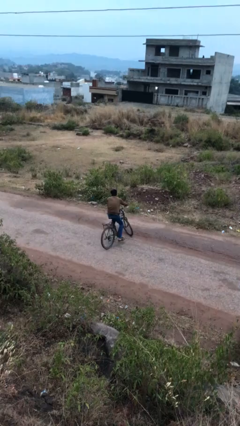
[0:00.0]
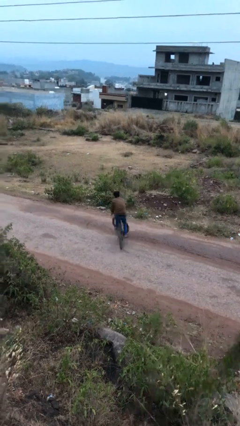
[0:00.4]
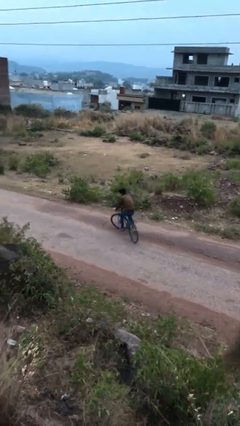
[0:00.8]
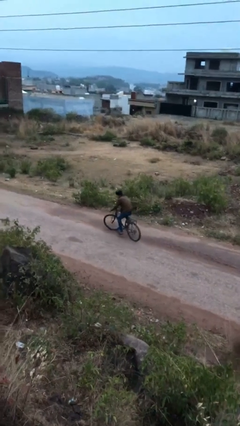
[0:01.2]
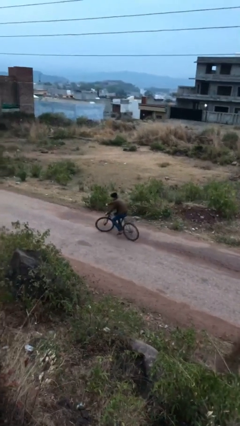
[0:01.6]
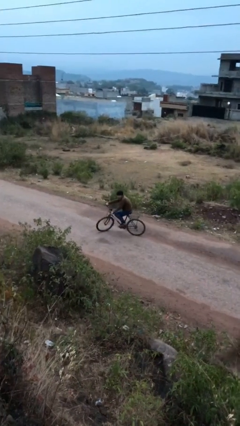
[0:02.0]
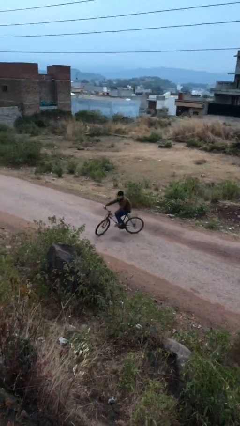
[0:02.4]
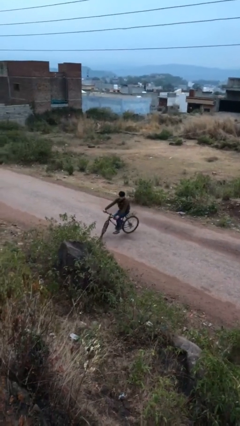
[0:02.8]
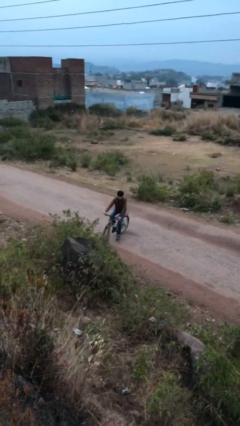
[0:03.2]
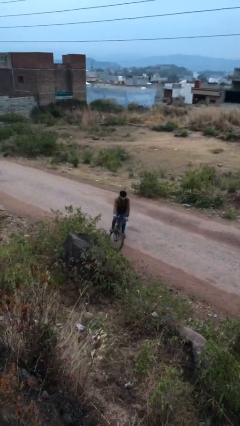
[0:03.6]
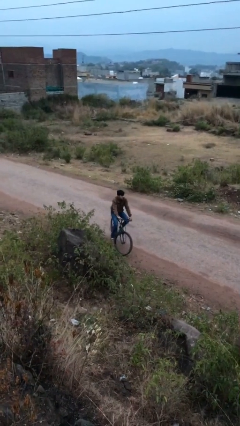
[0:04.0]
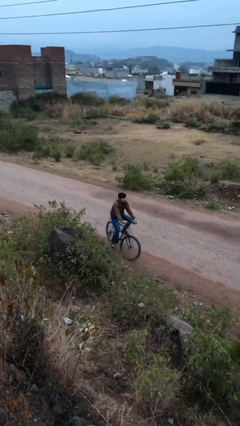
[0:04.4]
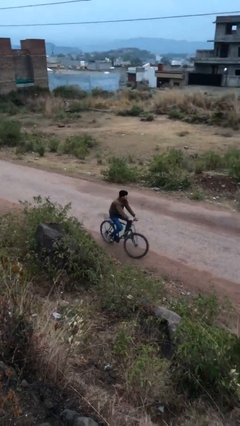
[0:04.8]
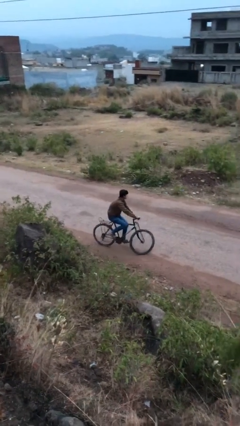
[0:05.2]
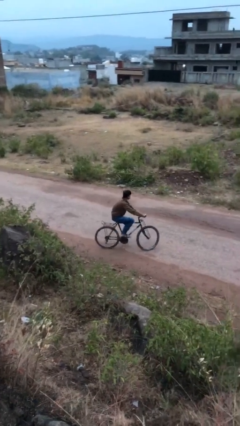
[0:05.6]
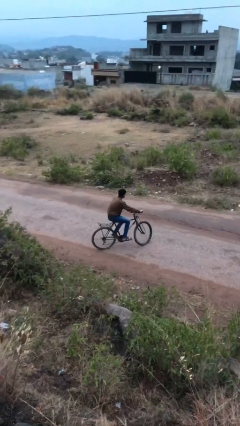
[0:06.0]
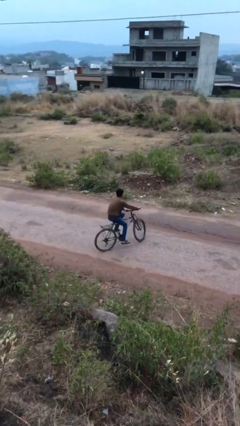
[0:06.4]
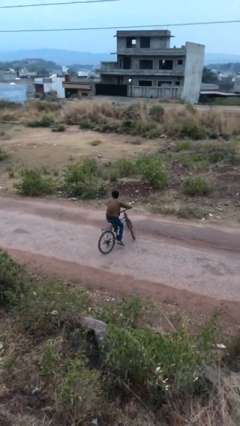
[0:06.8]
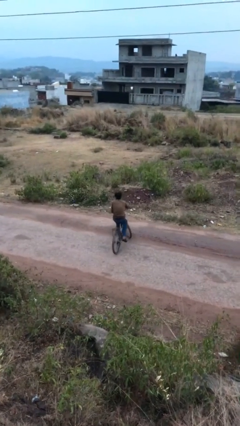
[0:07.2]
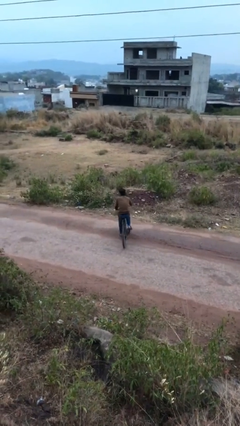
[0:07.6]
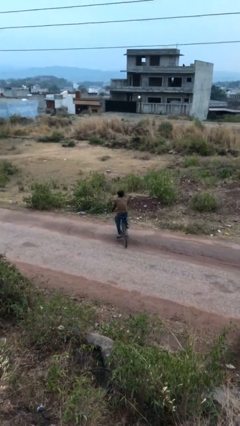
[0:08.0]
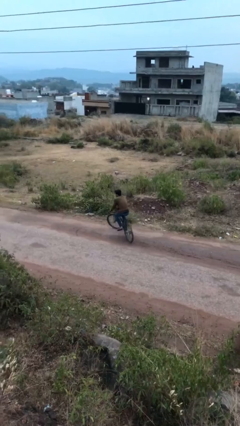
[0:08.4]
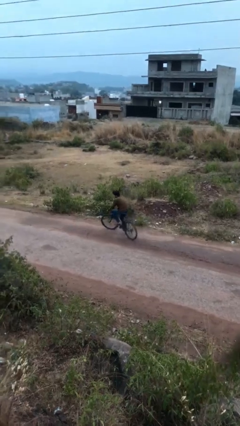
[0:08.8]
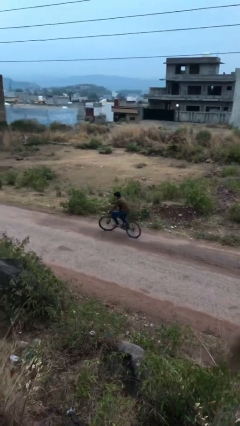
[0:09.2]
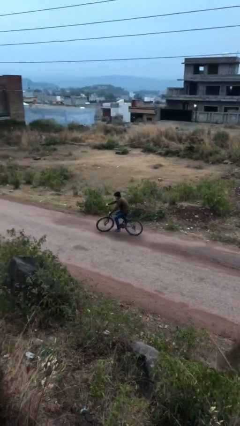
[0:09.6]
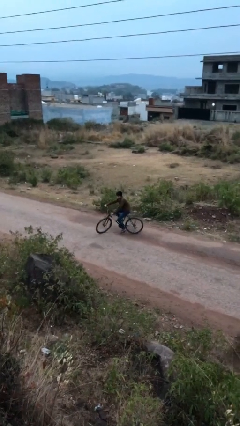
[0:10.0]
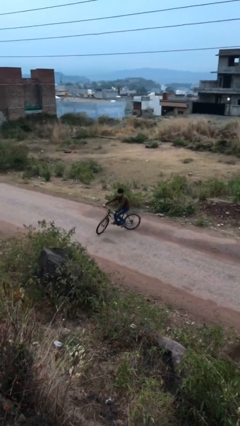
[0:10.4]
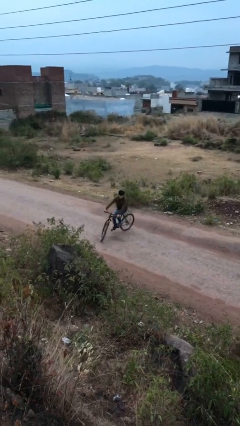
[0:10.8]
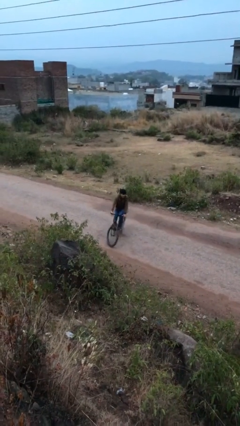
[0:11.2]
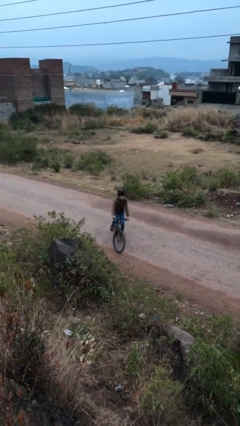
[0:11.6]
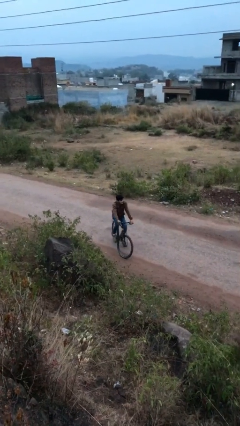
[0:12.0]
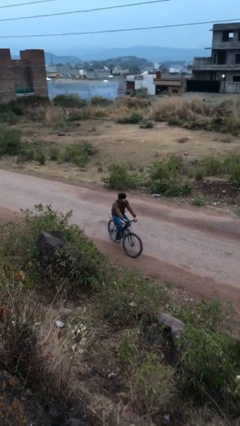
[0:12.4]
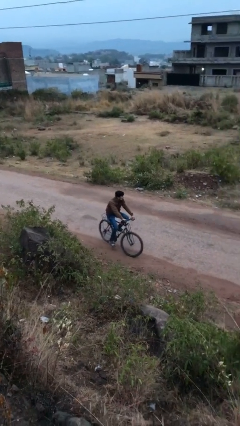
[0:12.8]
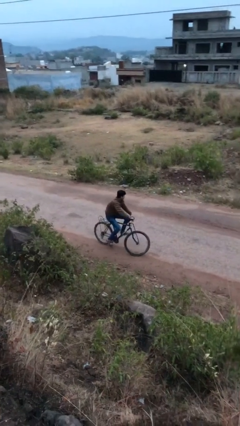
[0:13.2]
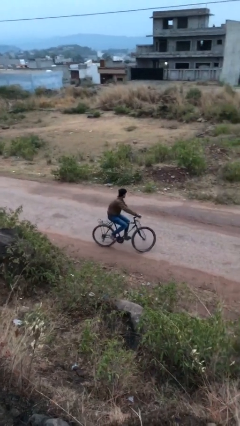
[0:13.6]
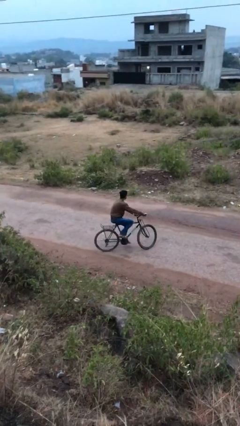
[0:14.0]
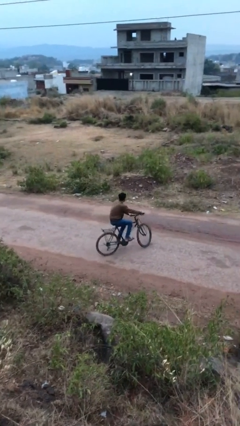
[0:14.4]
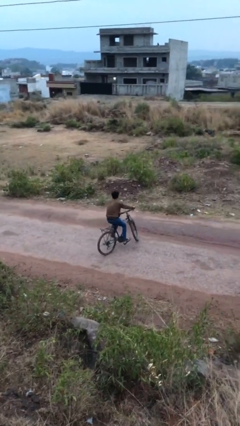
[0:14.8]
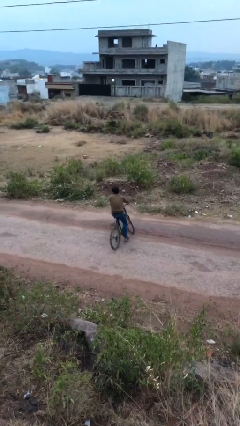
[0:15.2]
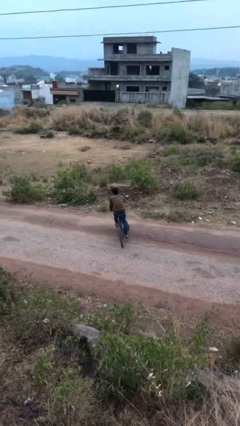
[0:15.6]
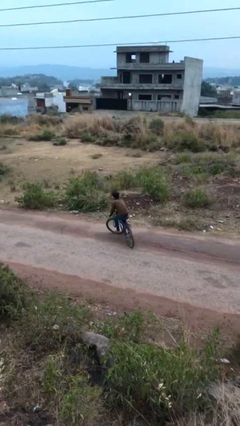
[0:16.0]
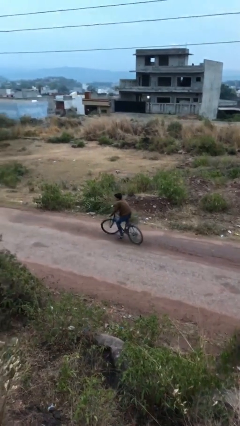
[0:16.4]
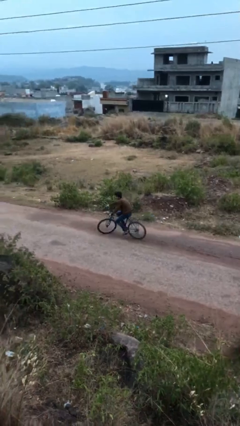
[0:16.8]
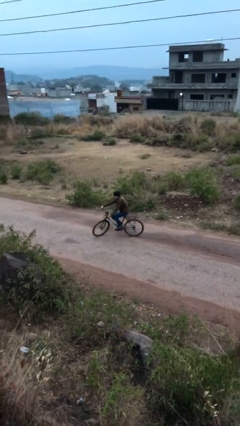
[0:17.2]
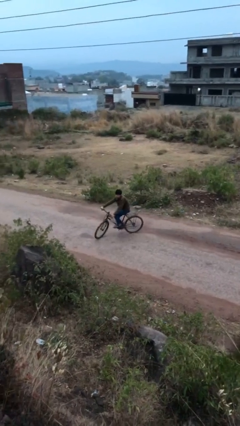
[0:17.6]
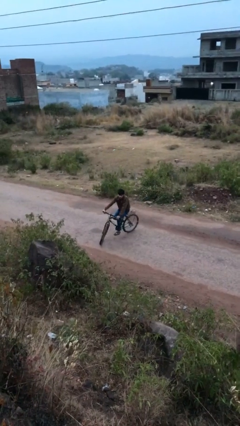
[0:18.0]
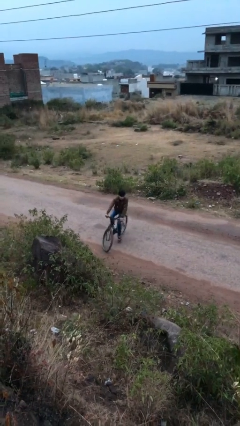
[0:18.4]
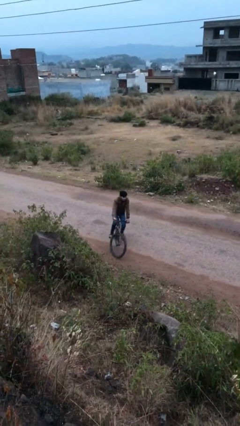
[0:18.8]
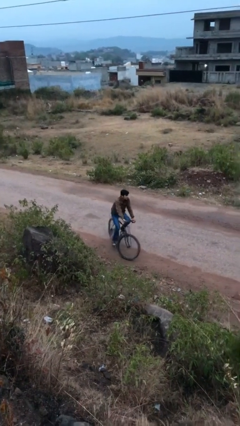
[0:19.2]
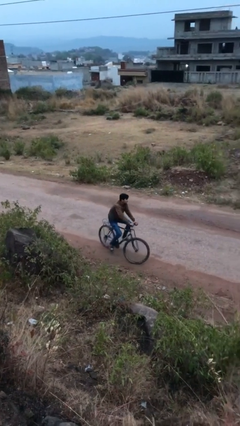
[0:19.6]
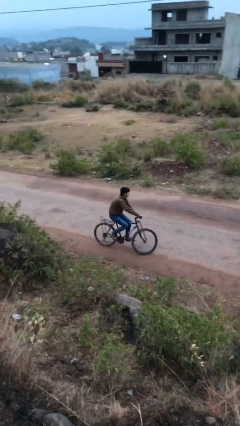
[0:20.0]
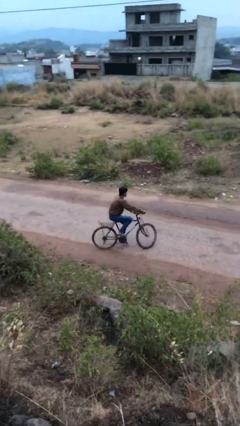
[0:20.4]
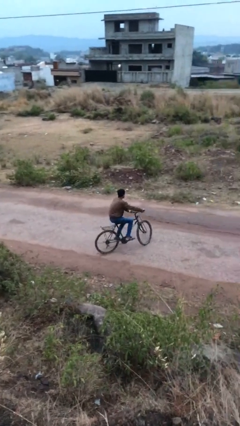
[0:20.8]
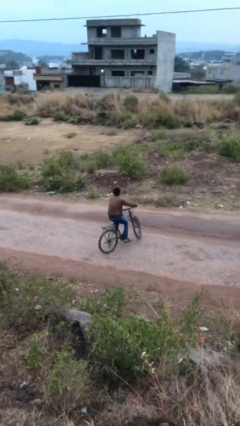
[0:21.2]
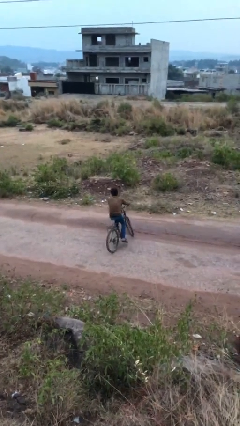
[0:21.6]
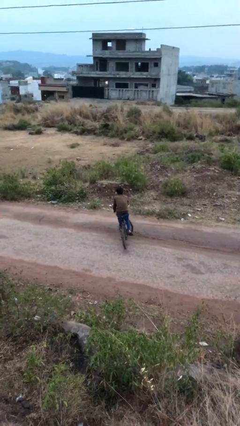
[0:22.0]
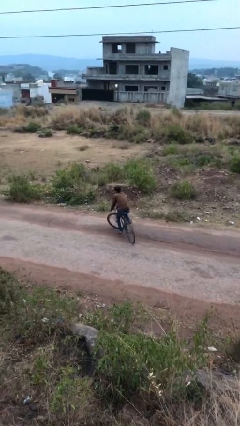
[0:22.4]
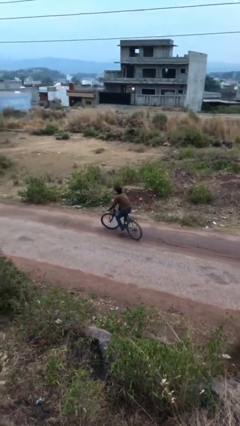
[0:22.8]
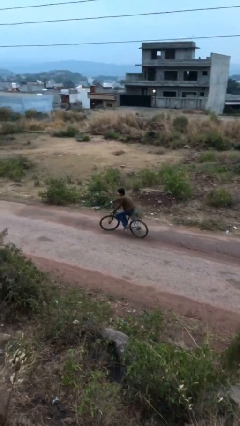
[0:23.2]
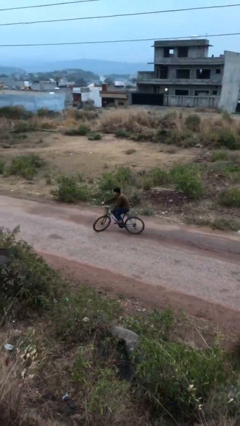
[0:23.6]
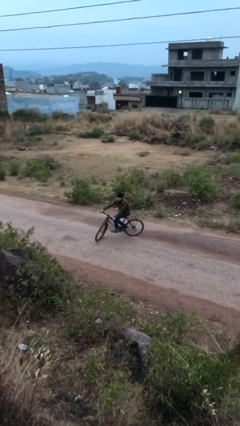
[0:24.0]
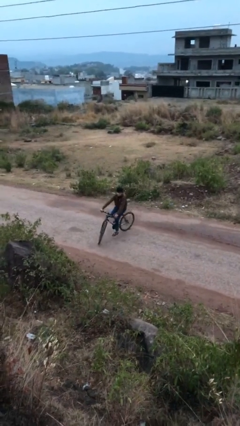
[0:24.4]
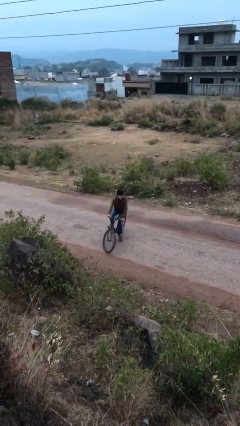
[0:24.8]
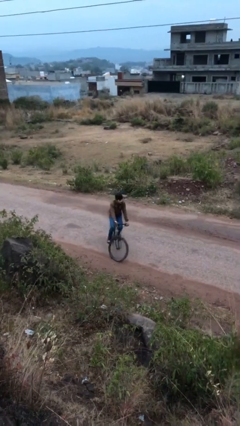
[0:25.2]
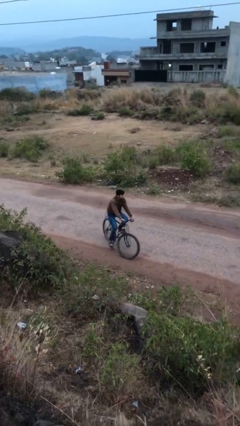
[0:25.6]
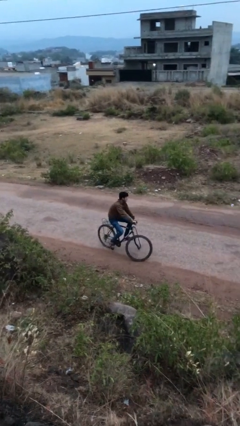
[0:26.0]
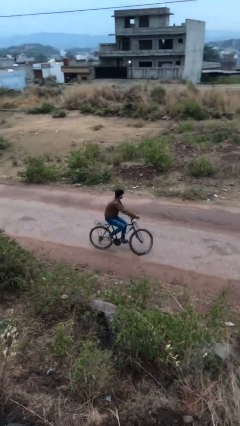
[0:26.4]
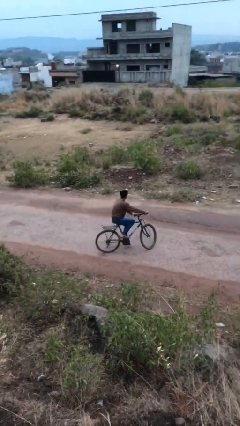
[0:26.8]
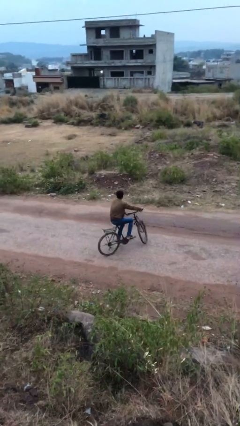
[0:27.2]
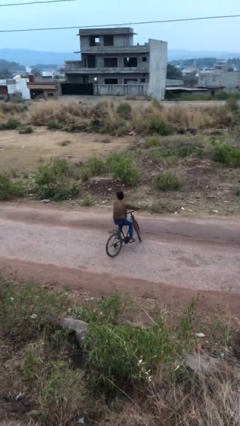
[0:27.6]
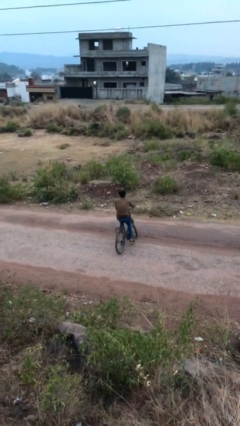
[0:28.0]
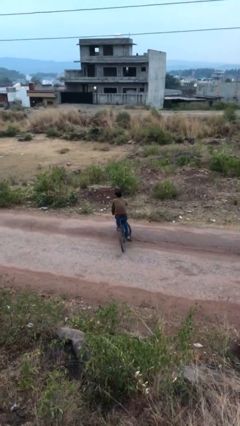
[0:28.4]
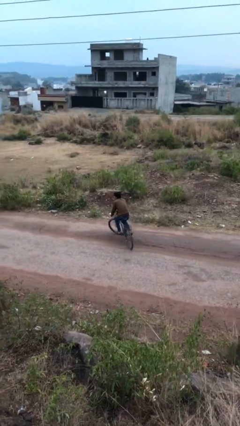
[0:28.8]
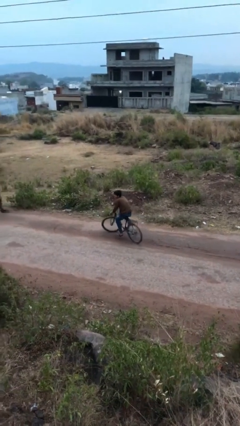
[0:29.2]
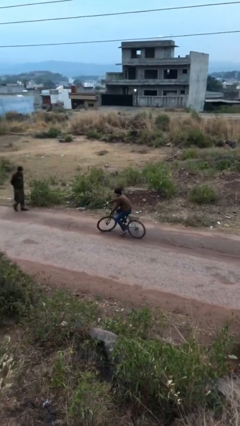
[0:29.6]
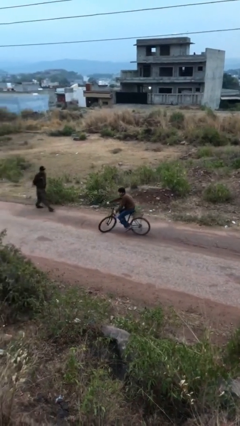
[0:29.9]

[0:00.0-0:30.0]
person rides bicycle

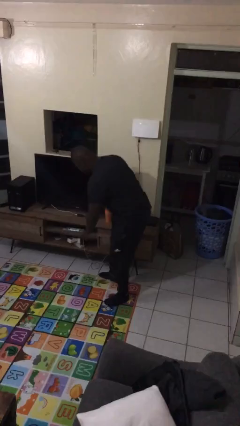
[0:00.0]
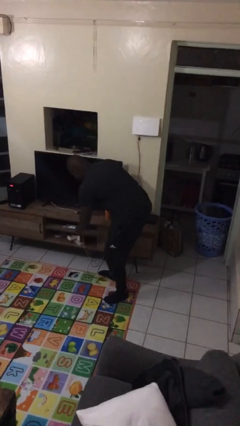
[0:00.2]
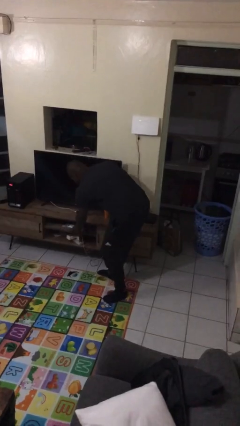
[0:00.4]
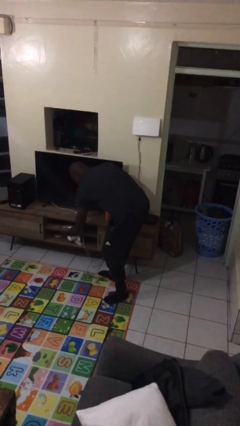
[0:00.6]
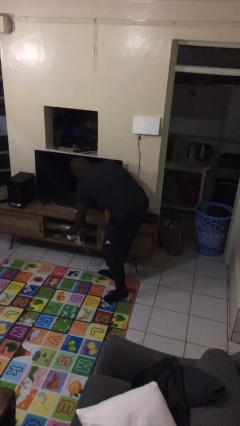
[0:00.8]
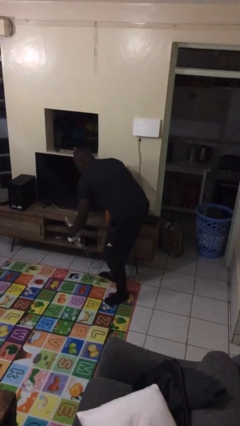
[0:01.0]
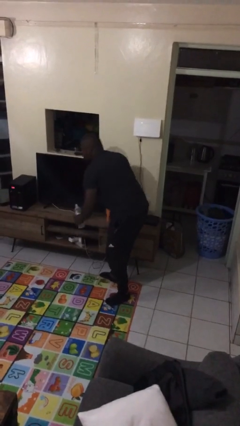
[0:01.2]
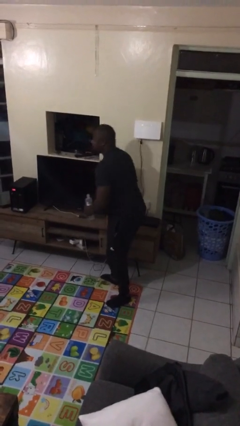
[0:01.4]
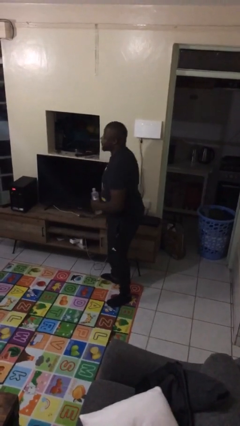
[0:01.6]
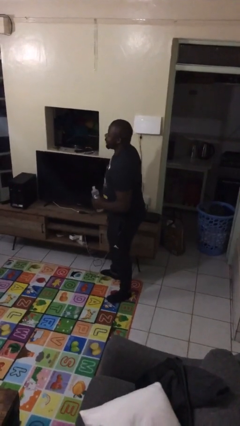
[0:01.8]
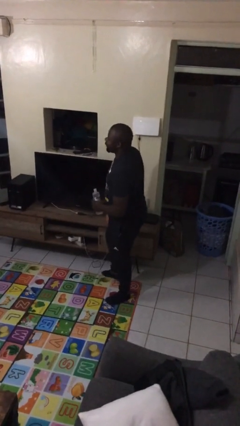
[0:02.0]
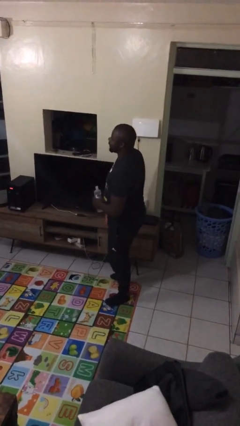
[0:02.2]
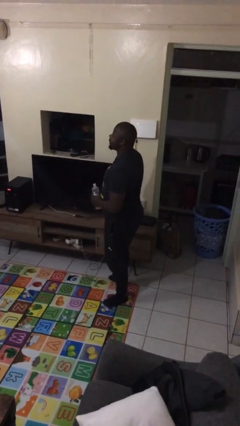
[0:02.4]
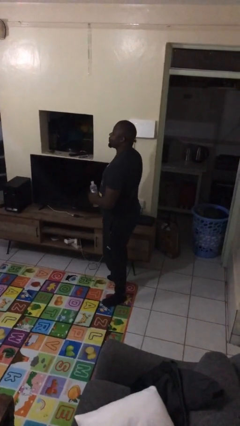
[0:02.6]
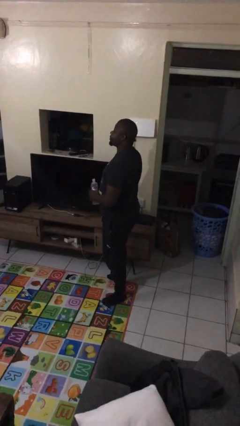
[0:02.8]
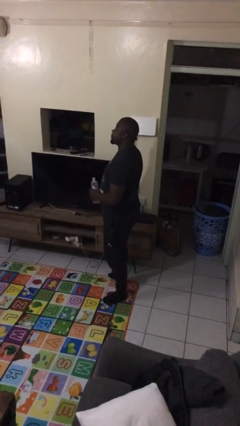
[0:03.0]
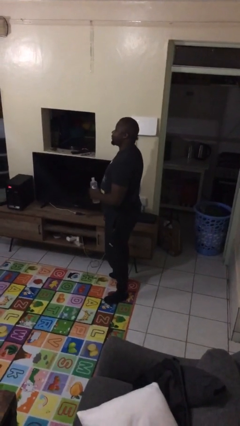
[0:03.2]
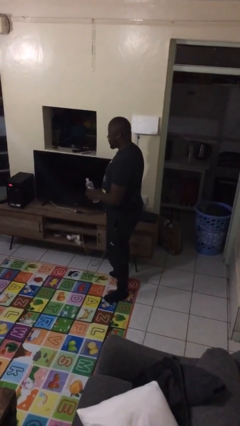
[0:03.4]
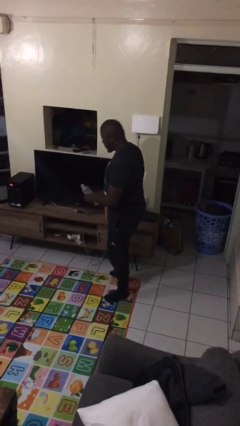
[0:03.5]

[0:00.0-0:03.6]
person picks up object from cabinet
